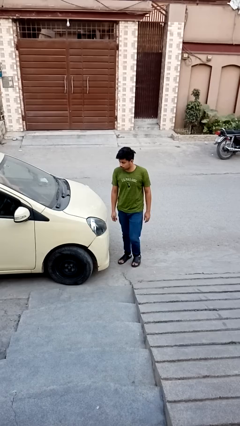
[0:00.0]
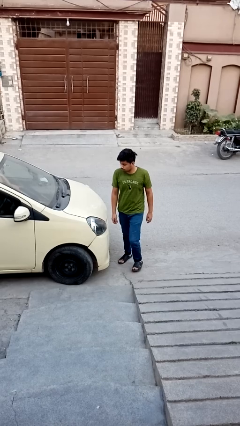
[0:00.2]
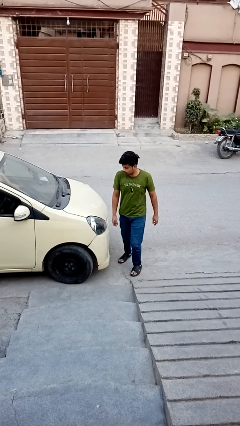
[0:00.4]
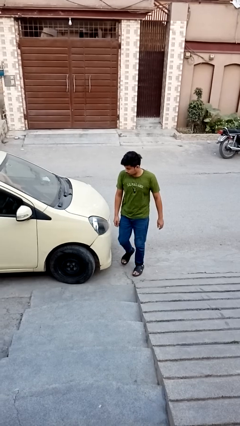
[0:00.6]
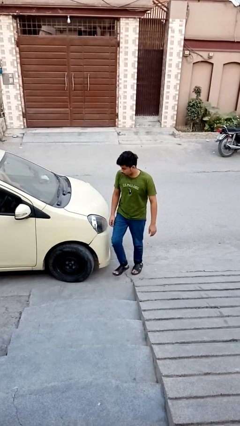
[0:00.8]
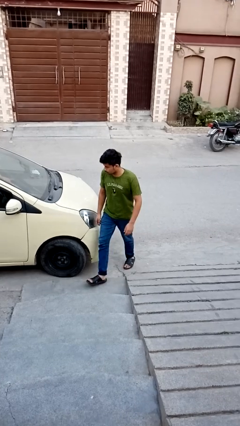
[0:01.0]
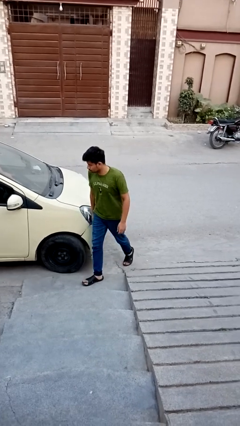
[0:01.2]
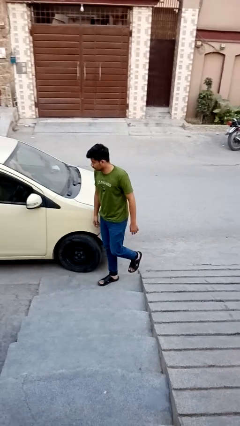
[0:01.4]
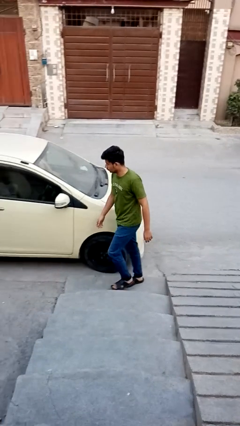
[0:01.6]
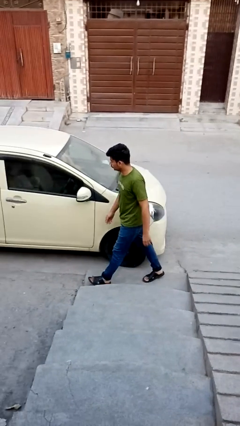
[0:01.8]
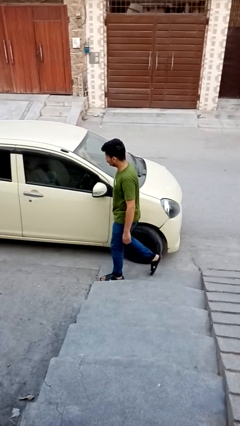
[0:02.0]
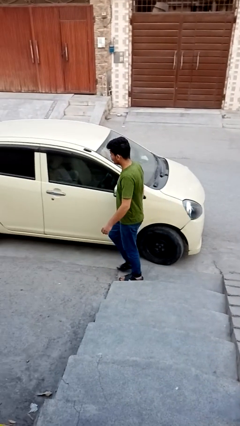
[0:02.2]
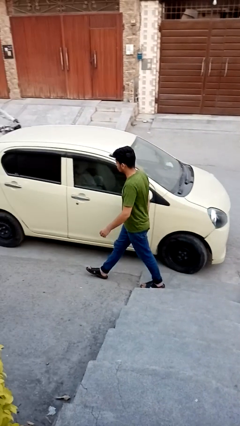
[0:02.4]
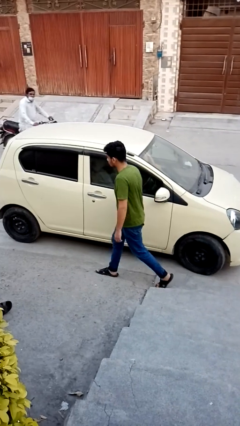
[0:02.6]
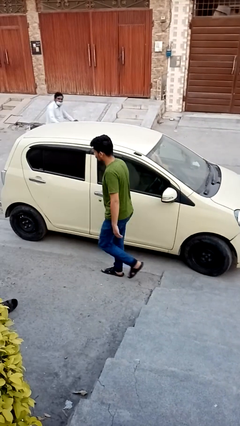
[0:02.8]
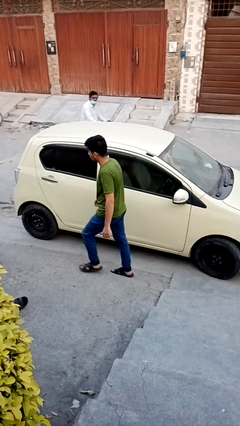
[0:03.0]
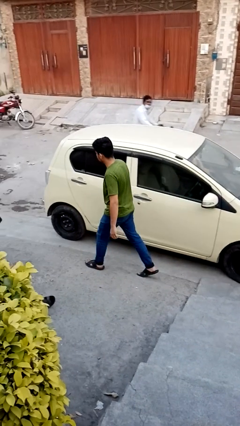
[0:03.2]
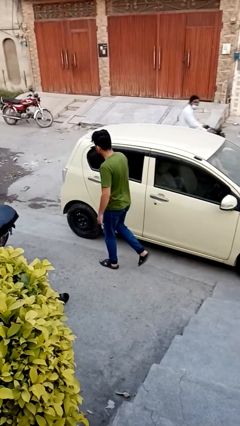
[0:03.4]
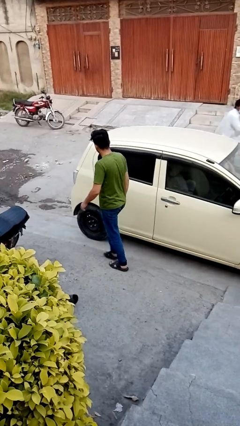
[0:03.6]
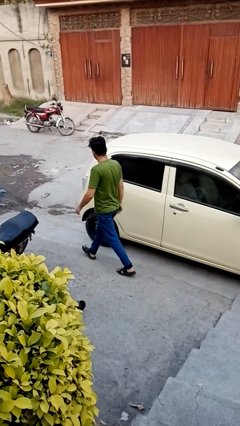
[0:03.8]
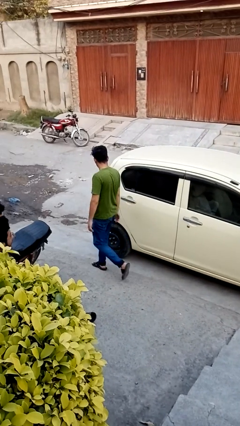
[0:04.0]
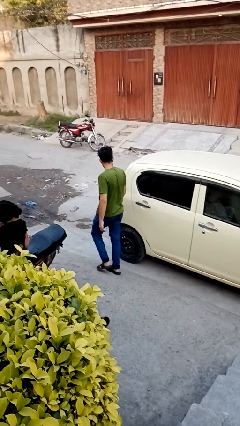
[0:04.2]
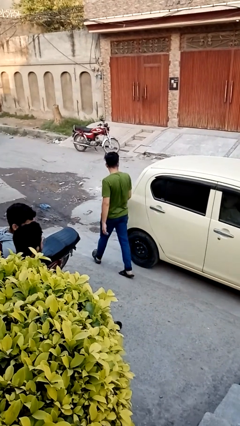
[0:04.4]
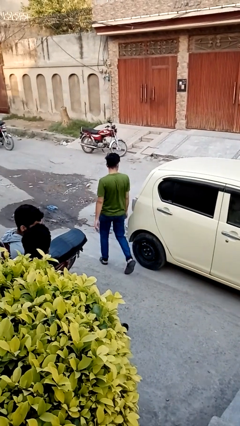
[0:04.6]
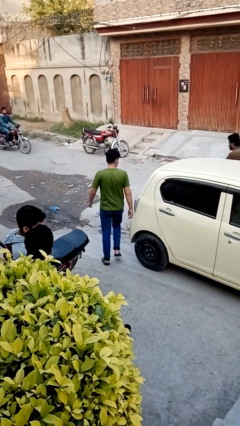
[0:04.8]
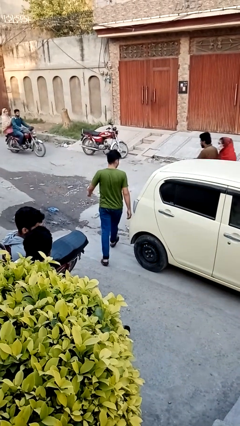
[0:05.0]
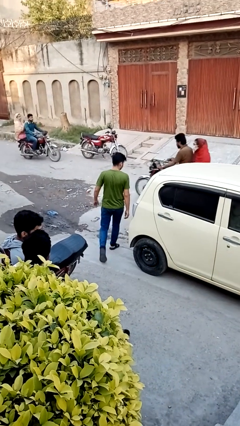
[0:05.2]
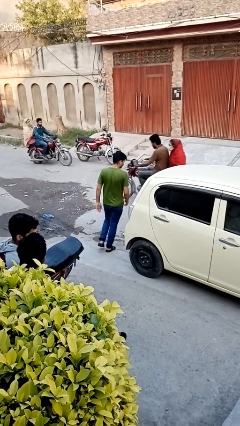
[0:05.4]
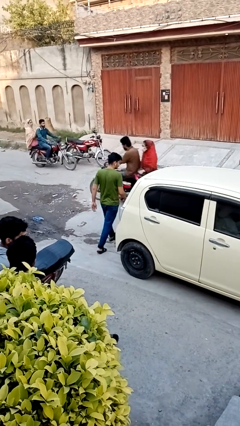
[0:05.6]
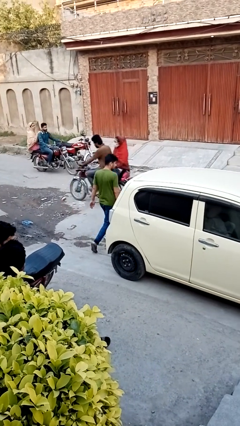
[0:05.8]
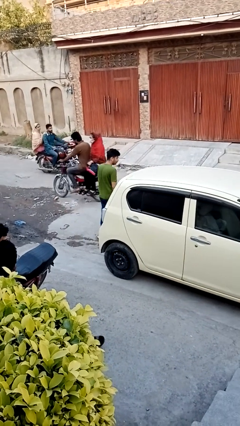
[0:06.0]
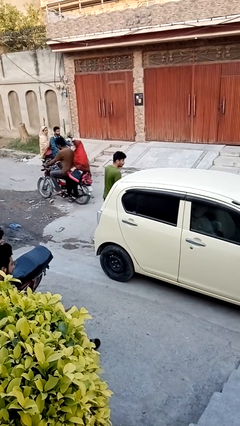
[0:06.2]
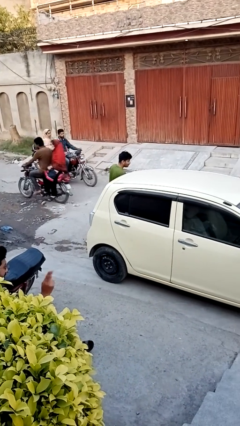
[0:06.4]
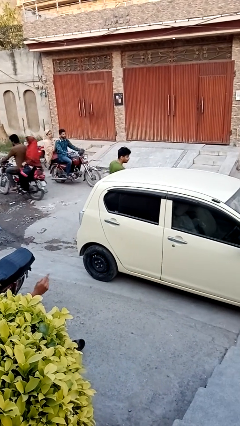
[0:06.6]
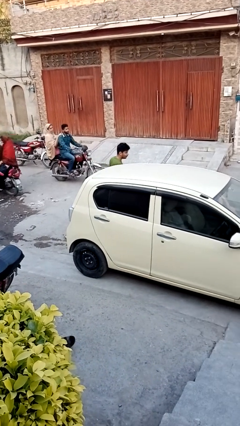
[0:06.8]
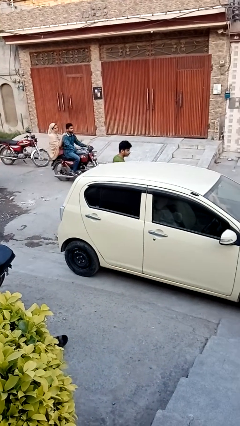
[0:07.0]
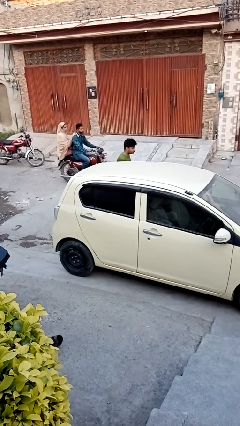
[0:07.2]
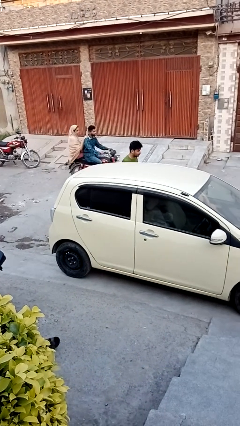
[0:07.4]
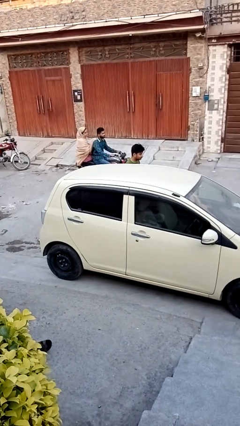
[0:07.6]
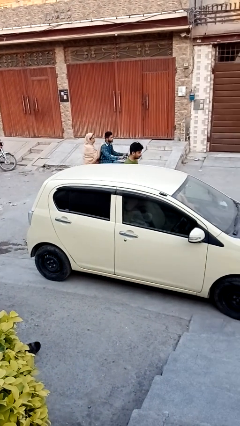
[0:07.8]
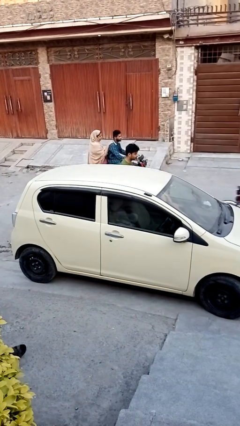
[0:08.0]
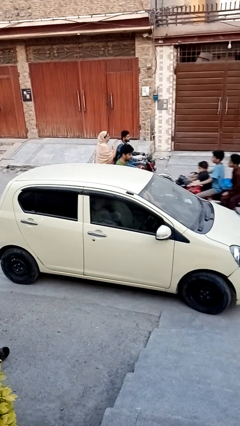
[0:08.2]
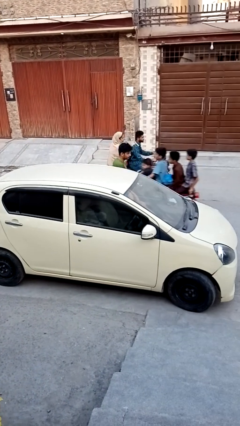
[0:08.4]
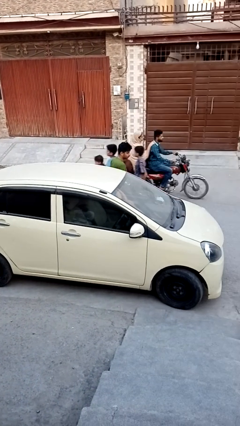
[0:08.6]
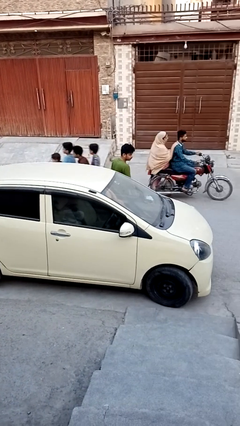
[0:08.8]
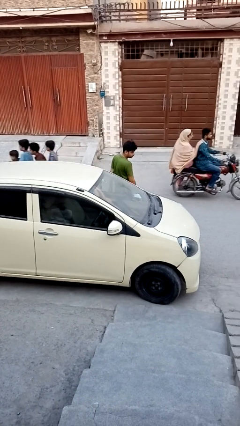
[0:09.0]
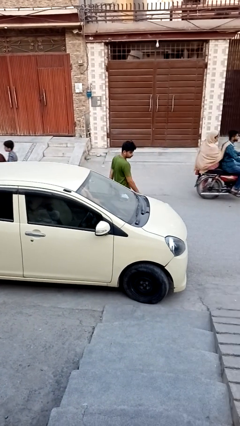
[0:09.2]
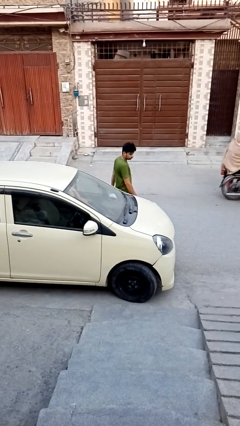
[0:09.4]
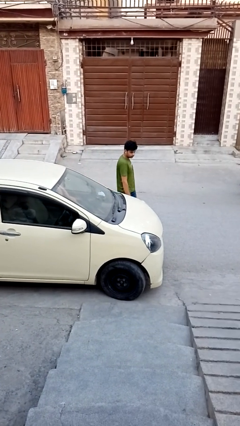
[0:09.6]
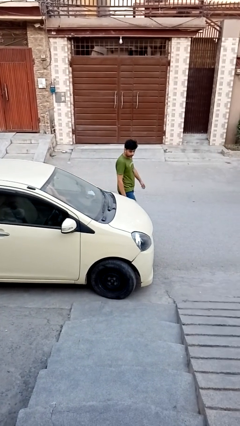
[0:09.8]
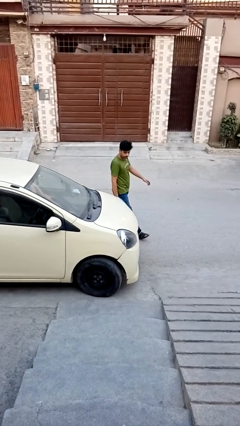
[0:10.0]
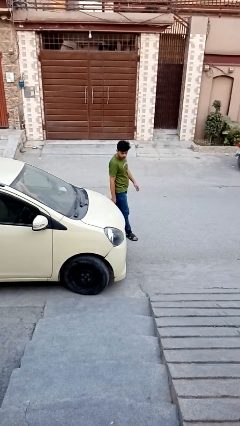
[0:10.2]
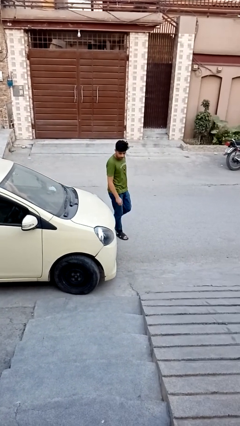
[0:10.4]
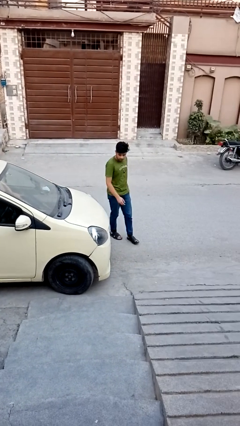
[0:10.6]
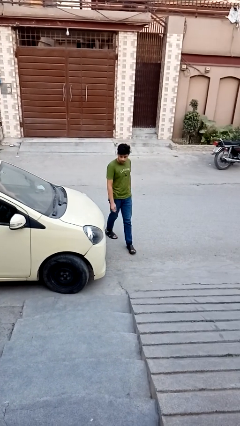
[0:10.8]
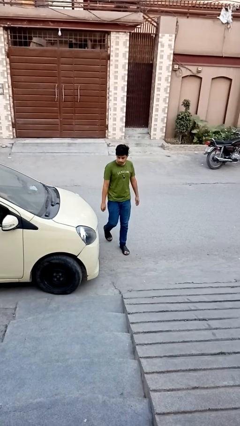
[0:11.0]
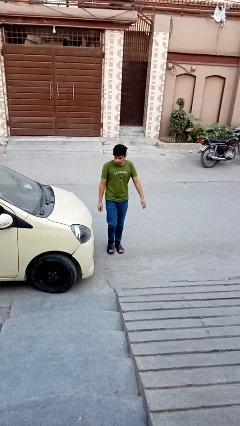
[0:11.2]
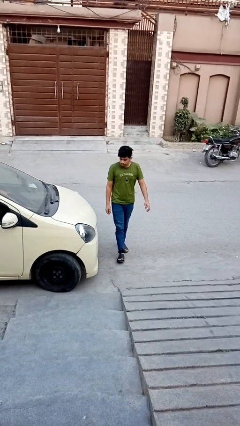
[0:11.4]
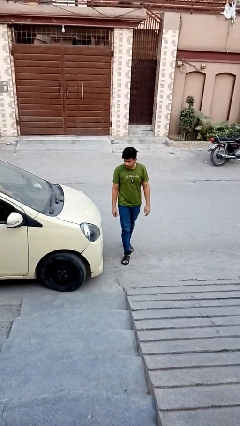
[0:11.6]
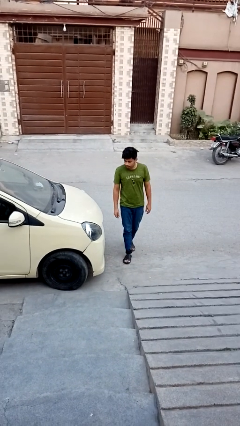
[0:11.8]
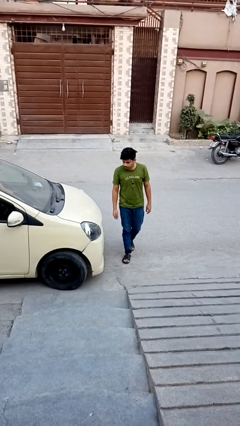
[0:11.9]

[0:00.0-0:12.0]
person walks around car

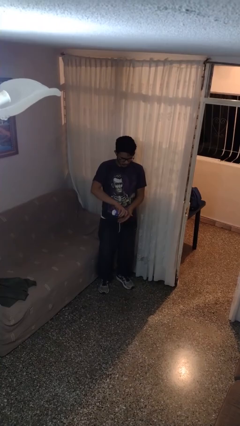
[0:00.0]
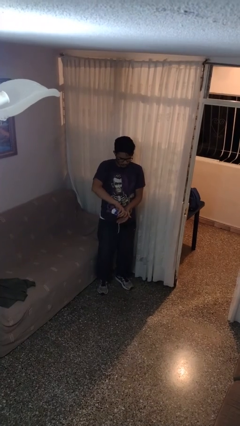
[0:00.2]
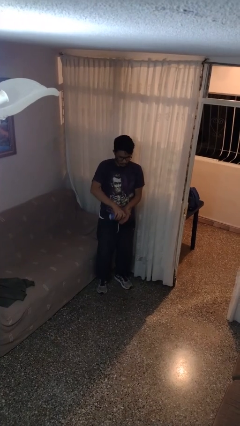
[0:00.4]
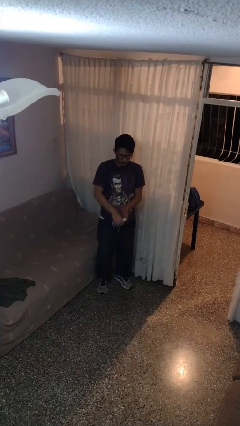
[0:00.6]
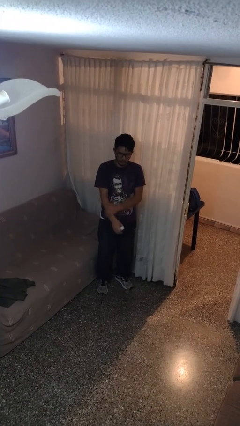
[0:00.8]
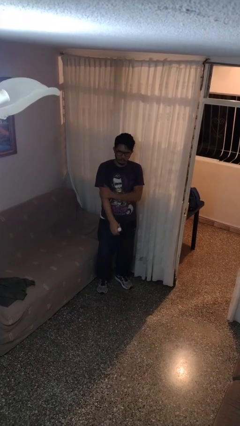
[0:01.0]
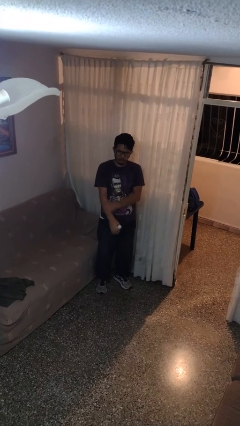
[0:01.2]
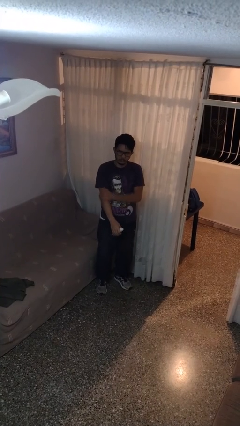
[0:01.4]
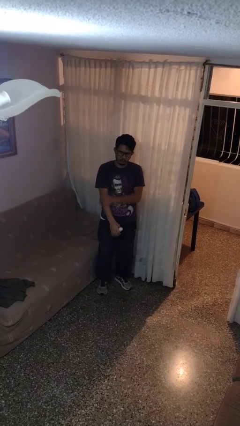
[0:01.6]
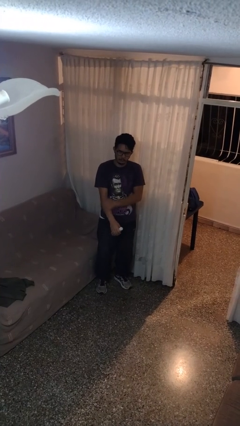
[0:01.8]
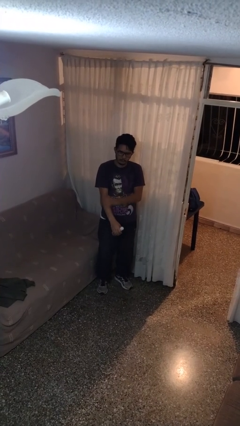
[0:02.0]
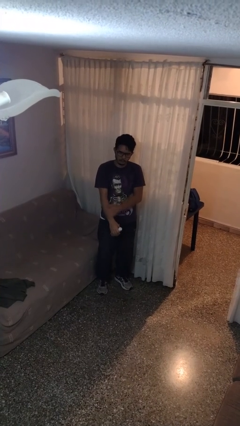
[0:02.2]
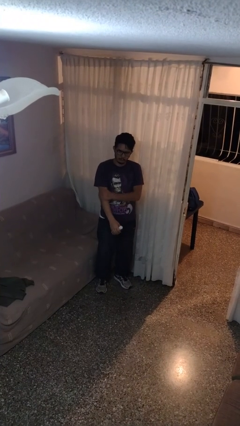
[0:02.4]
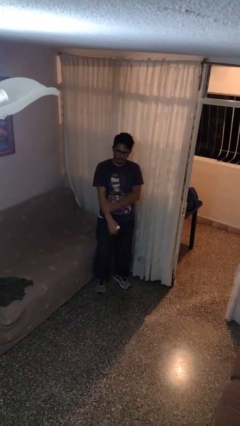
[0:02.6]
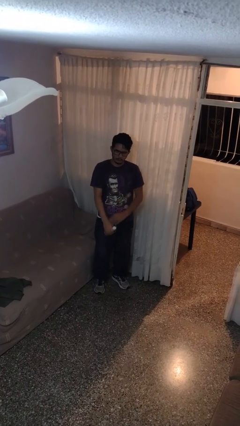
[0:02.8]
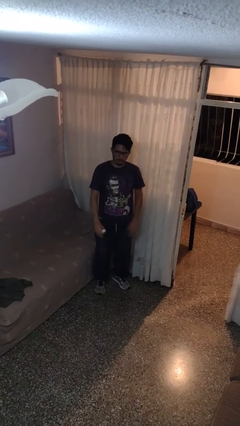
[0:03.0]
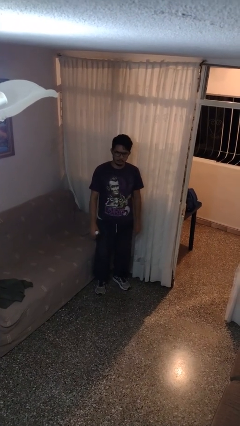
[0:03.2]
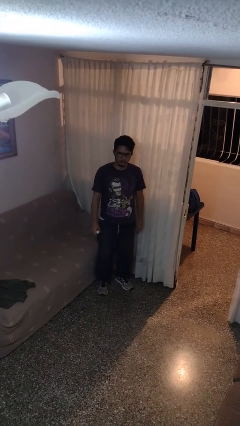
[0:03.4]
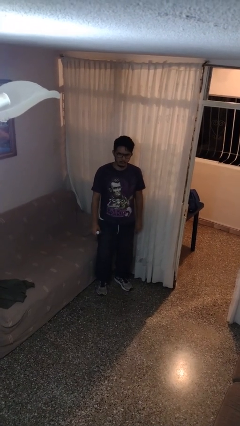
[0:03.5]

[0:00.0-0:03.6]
person applies sunscreen

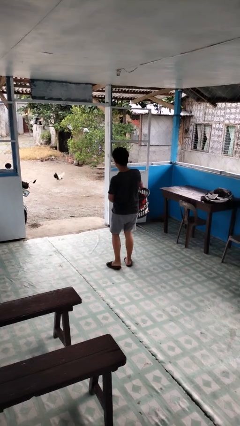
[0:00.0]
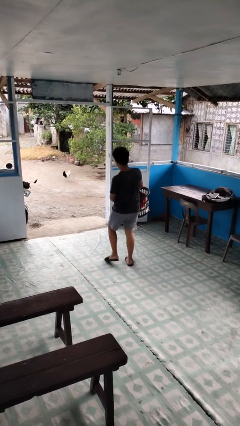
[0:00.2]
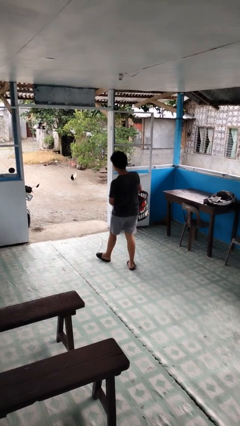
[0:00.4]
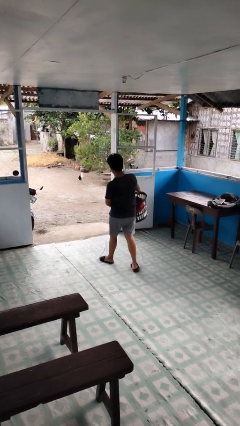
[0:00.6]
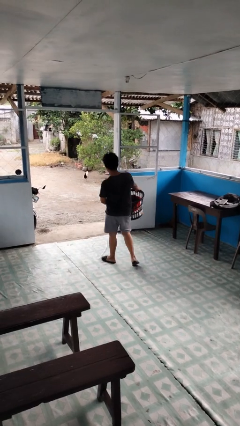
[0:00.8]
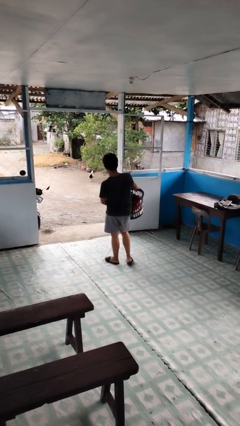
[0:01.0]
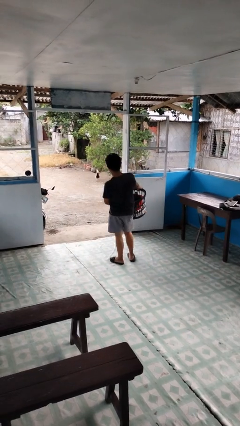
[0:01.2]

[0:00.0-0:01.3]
person carries laundry basket

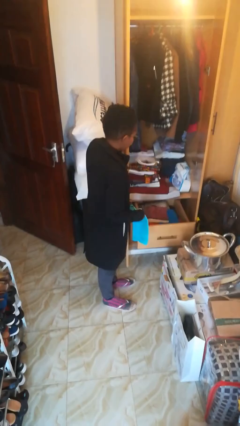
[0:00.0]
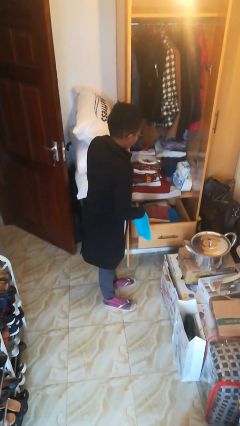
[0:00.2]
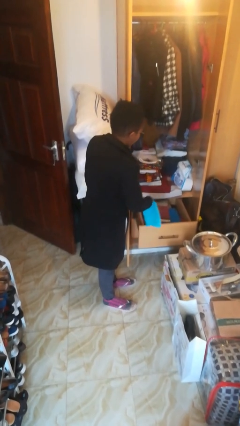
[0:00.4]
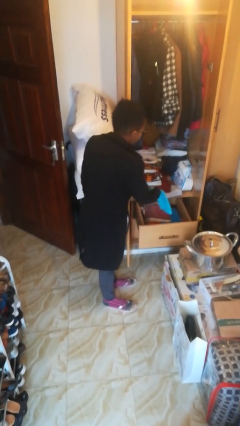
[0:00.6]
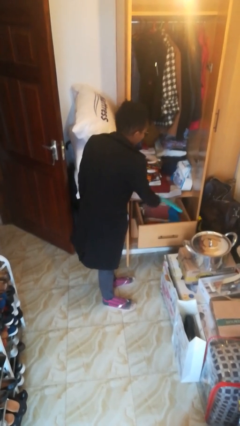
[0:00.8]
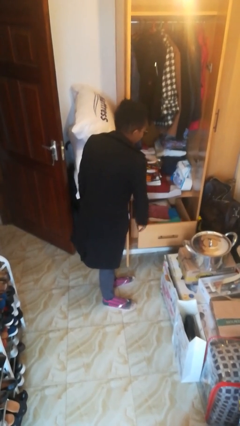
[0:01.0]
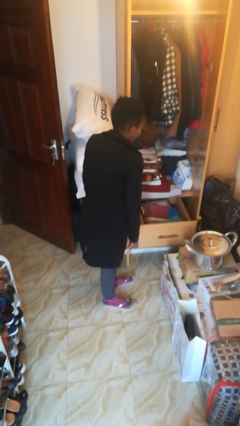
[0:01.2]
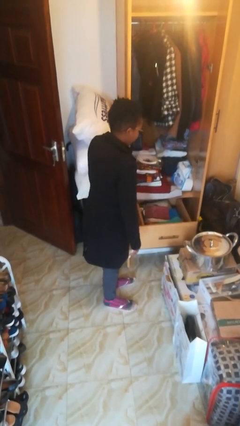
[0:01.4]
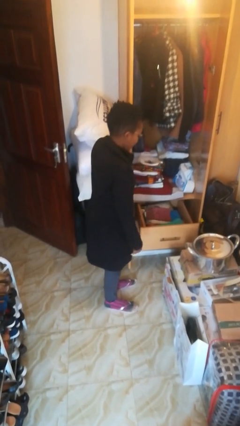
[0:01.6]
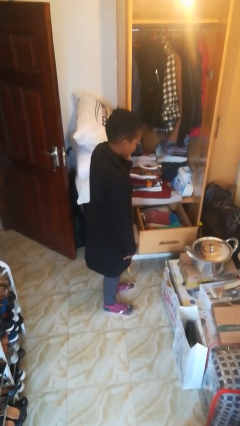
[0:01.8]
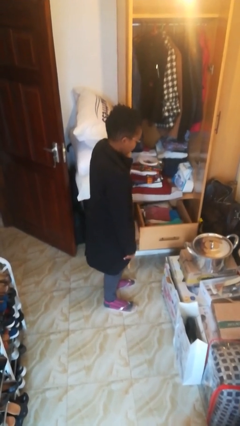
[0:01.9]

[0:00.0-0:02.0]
person puts clothes into dresser
